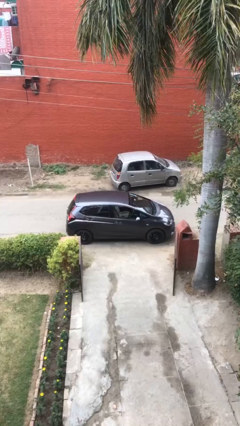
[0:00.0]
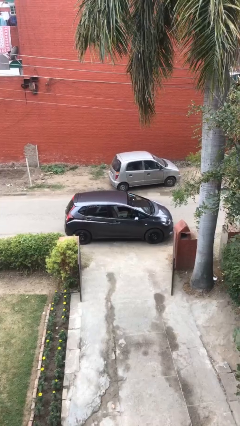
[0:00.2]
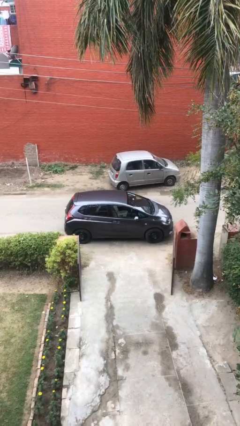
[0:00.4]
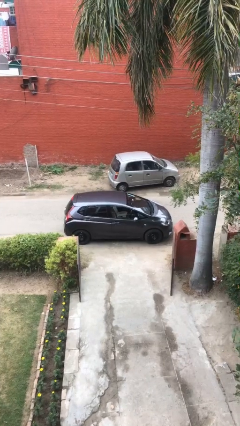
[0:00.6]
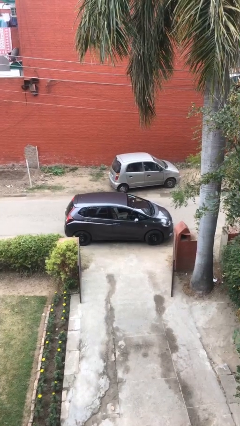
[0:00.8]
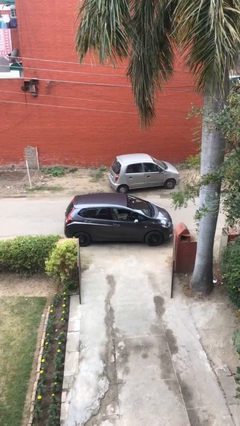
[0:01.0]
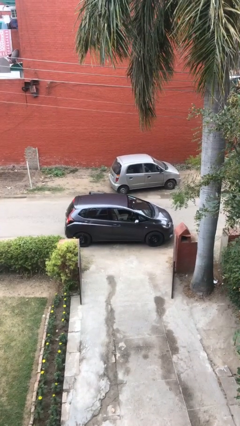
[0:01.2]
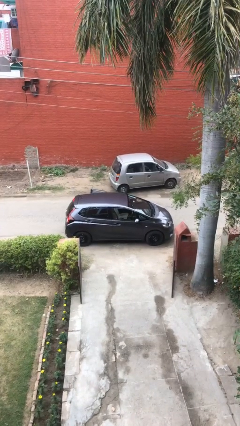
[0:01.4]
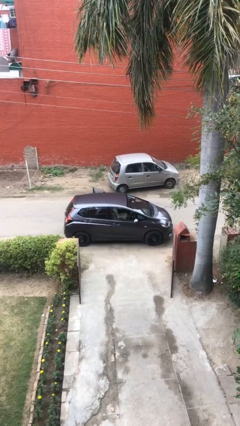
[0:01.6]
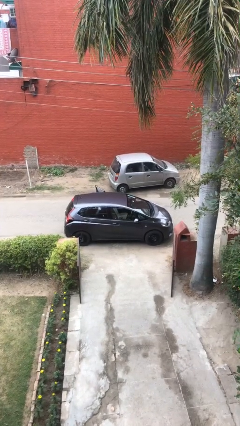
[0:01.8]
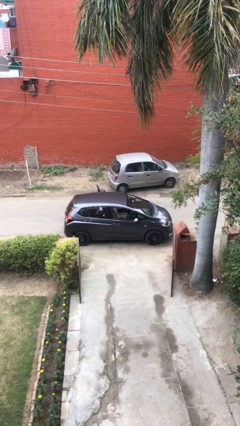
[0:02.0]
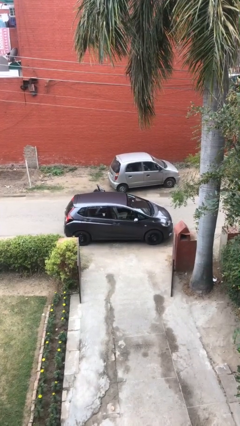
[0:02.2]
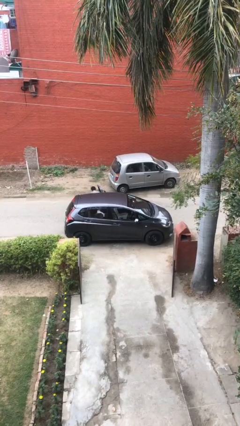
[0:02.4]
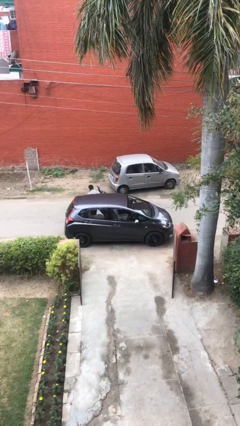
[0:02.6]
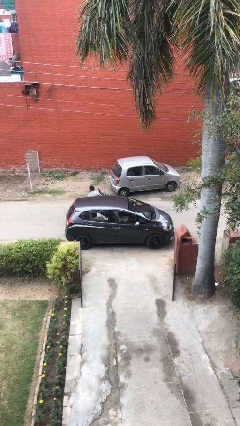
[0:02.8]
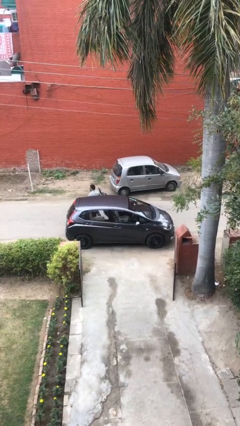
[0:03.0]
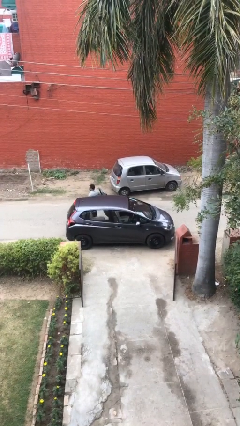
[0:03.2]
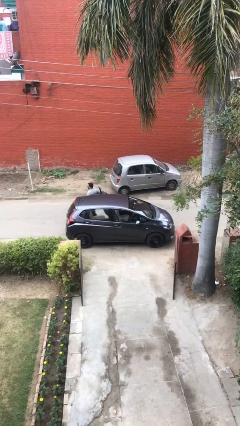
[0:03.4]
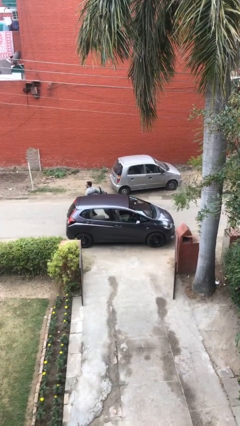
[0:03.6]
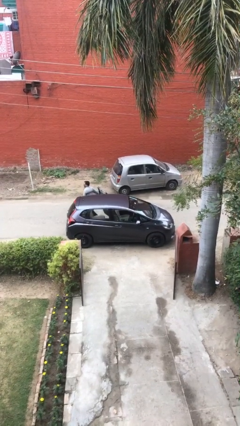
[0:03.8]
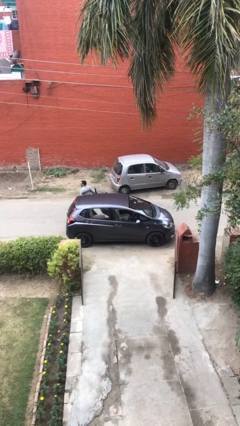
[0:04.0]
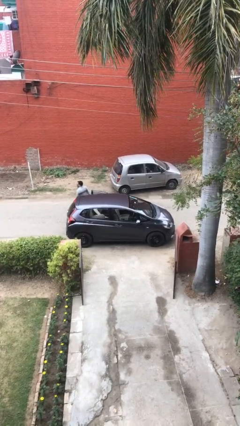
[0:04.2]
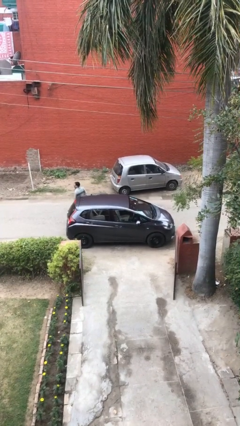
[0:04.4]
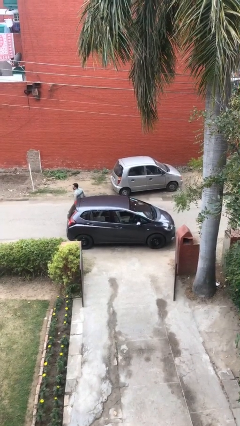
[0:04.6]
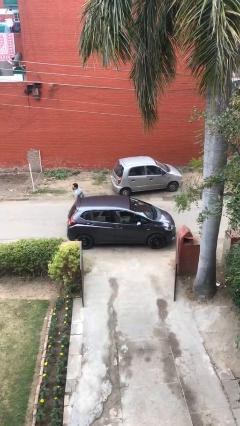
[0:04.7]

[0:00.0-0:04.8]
car drops off person

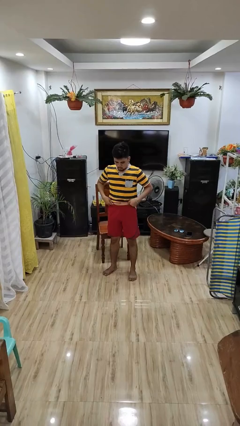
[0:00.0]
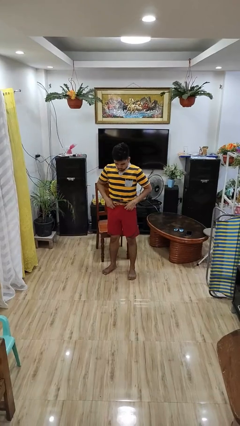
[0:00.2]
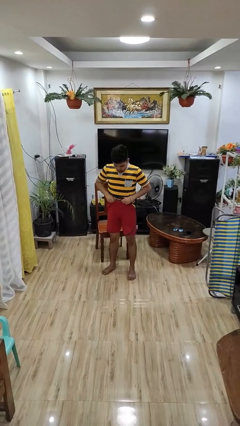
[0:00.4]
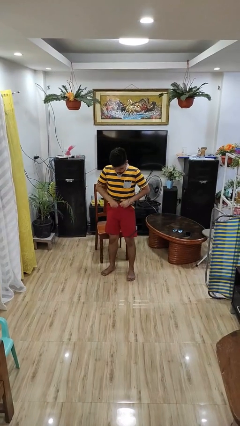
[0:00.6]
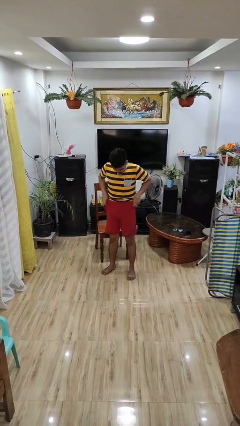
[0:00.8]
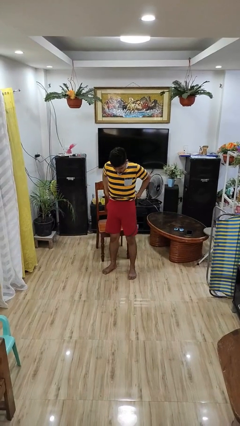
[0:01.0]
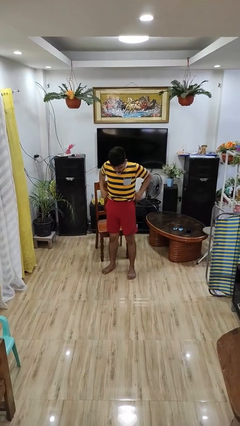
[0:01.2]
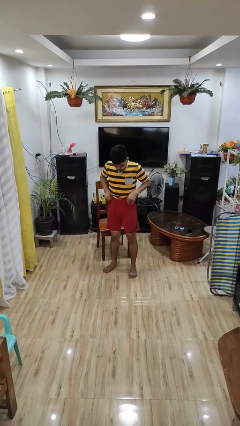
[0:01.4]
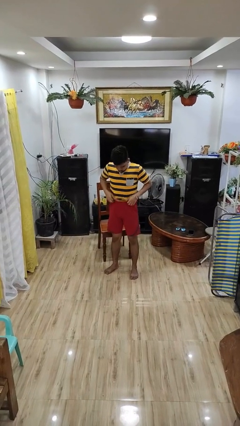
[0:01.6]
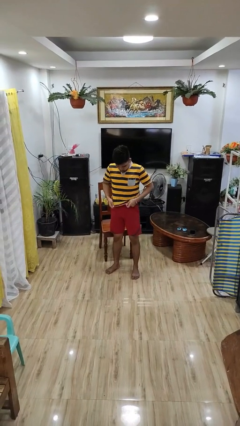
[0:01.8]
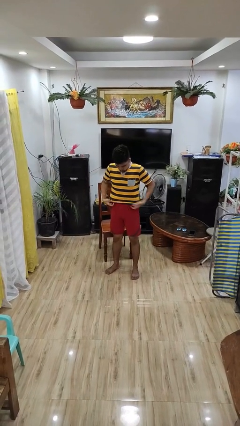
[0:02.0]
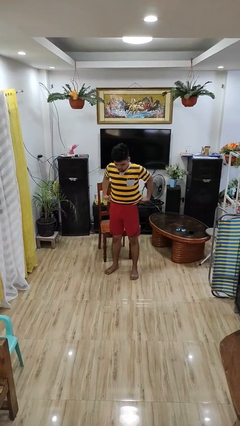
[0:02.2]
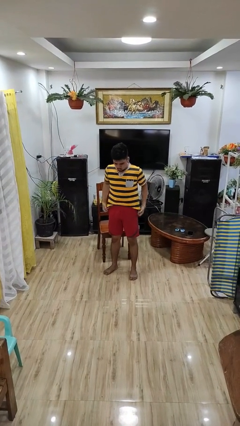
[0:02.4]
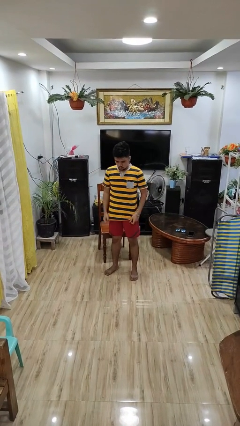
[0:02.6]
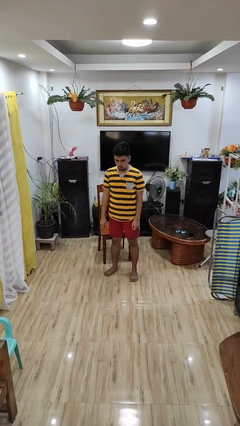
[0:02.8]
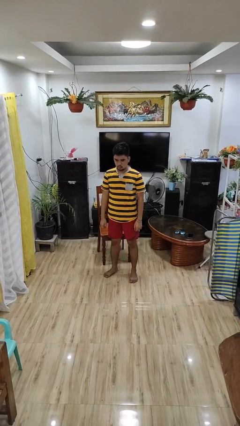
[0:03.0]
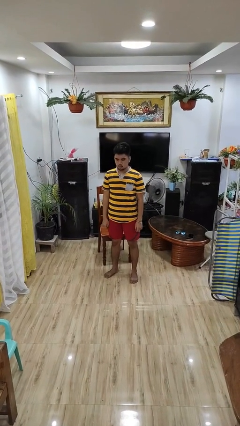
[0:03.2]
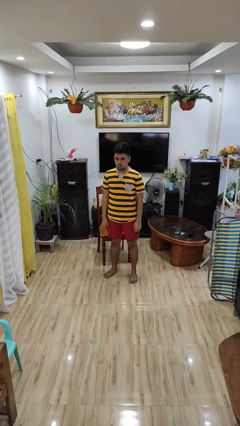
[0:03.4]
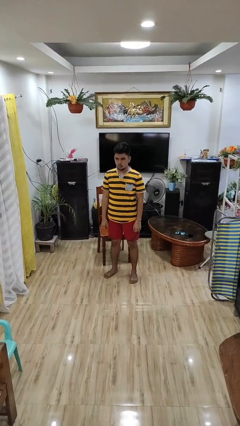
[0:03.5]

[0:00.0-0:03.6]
person hikes up pants

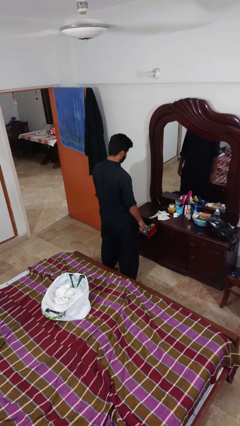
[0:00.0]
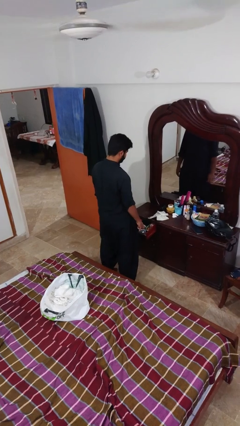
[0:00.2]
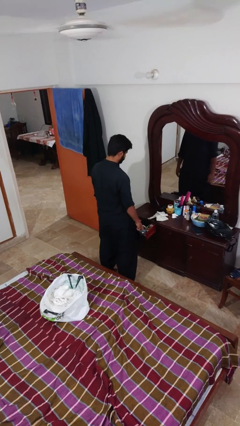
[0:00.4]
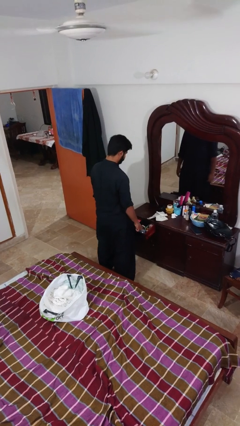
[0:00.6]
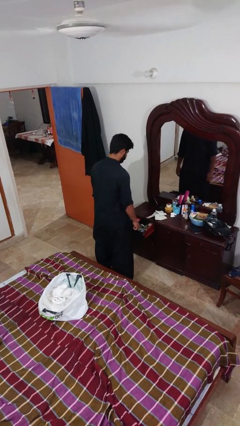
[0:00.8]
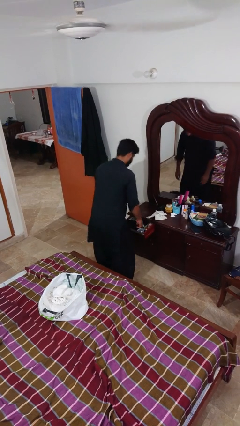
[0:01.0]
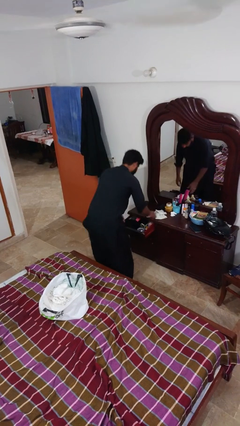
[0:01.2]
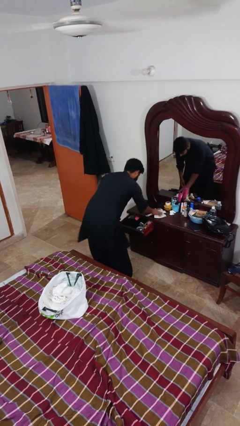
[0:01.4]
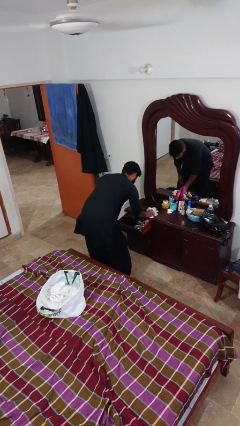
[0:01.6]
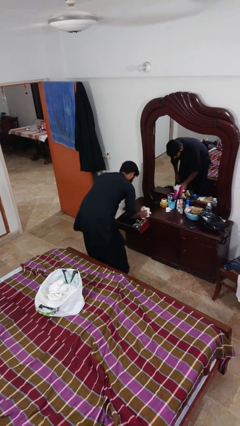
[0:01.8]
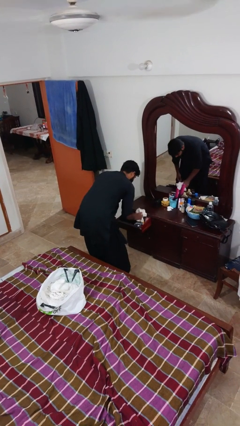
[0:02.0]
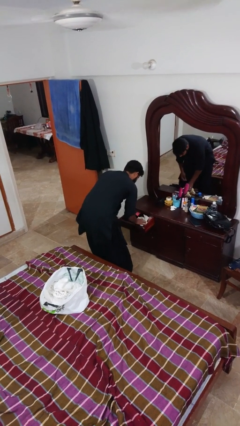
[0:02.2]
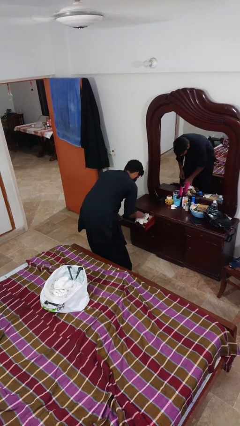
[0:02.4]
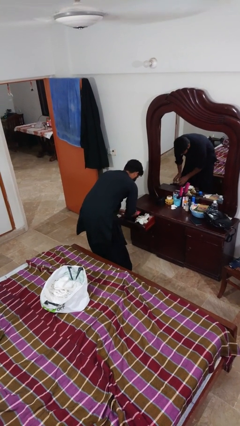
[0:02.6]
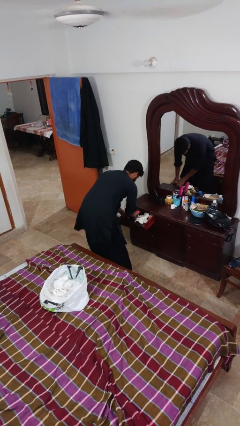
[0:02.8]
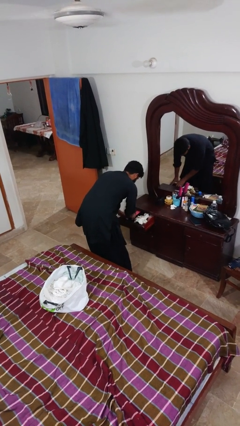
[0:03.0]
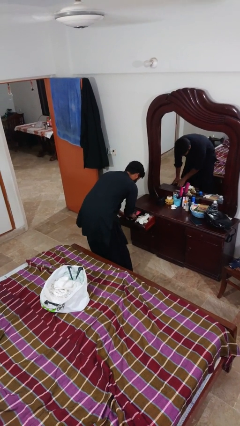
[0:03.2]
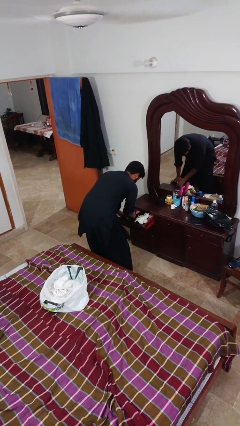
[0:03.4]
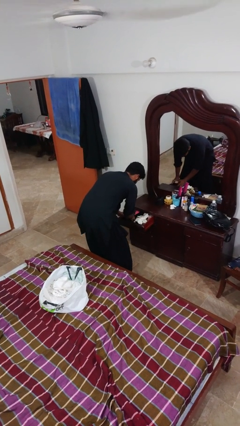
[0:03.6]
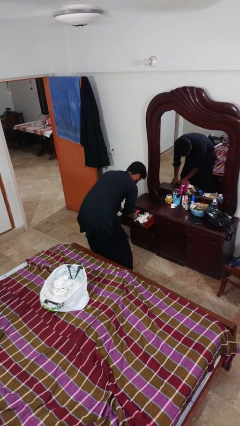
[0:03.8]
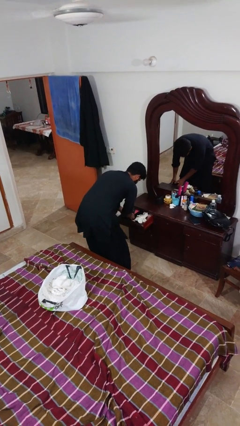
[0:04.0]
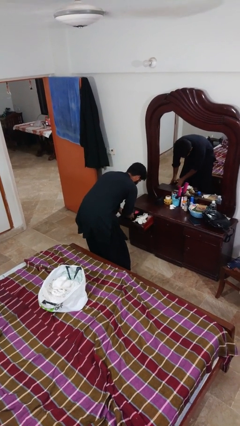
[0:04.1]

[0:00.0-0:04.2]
person puts clothes into dresser

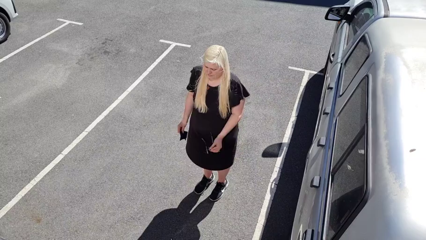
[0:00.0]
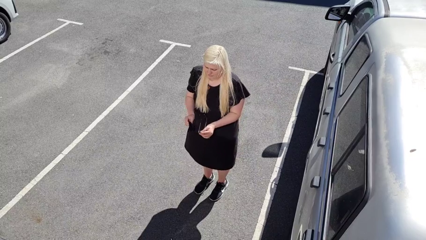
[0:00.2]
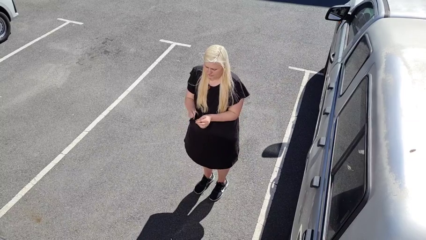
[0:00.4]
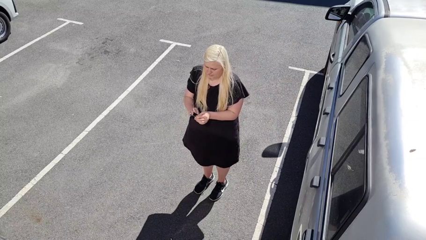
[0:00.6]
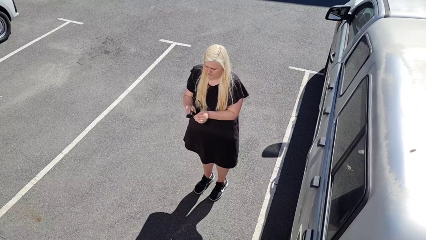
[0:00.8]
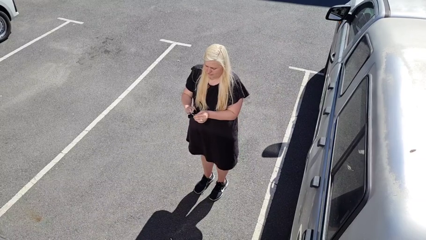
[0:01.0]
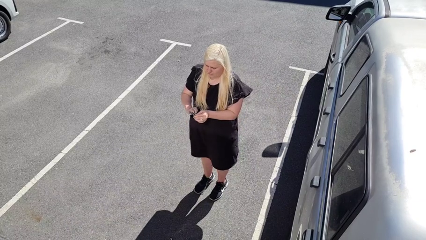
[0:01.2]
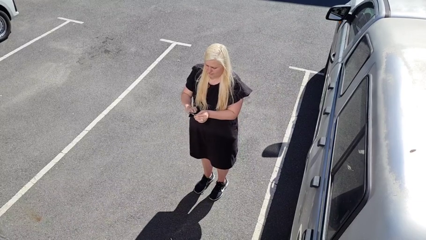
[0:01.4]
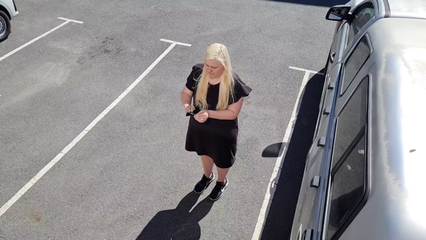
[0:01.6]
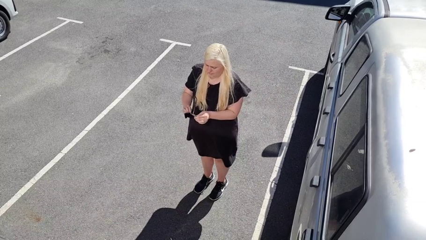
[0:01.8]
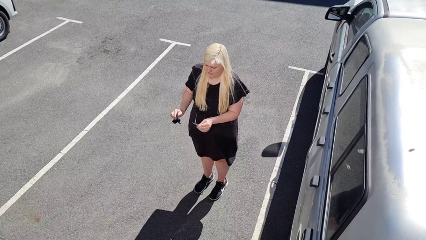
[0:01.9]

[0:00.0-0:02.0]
person cleans eyeglasses

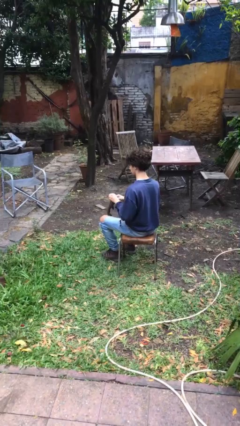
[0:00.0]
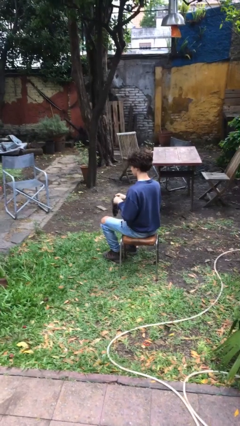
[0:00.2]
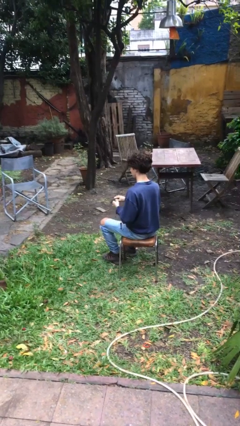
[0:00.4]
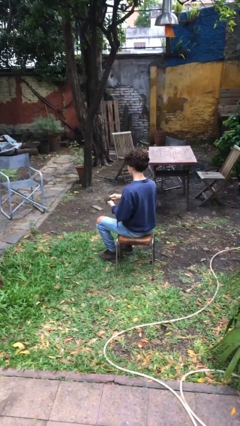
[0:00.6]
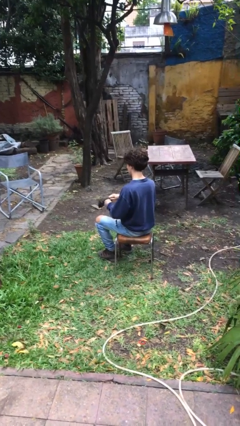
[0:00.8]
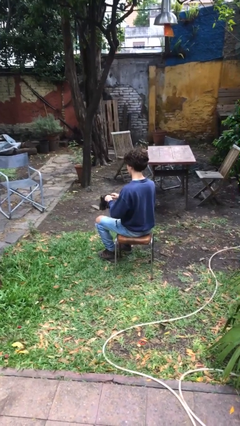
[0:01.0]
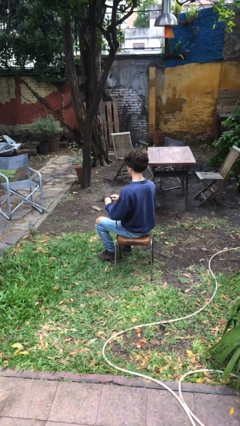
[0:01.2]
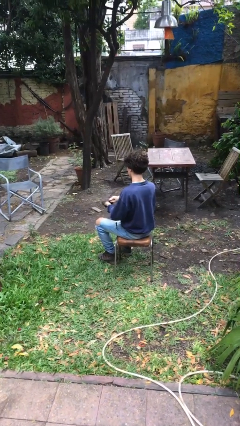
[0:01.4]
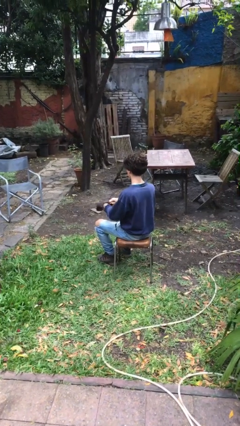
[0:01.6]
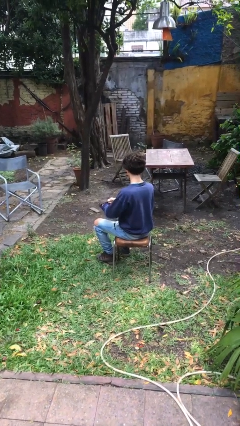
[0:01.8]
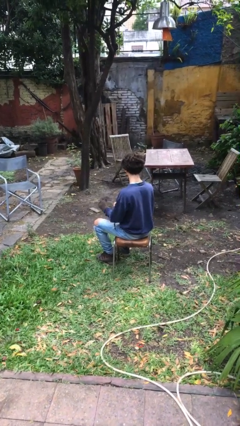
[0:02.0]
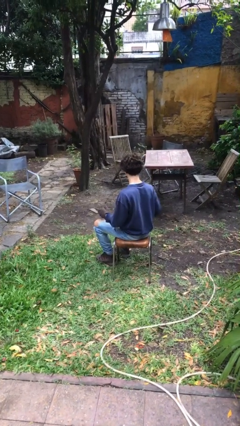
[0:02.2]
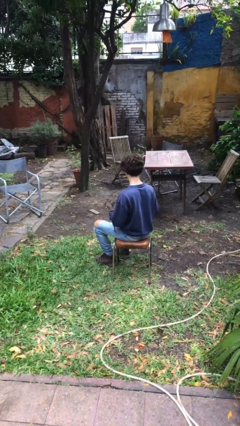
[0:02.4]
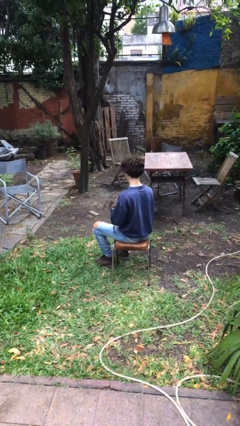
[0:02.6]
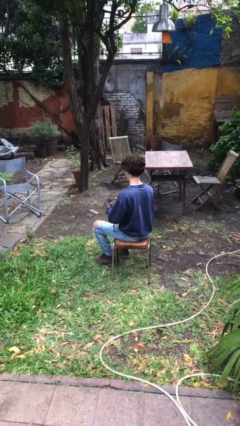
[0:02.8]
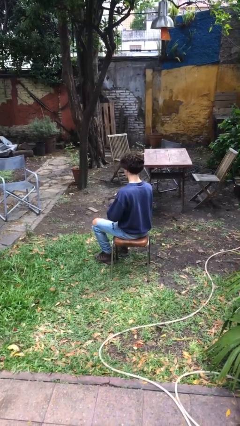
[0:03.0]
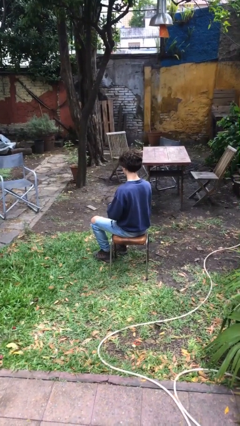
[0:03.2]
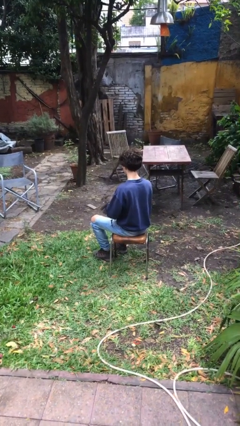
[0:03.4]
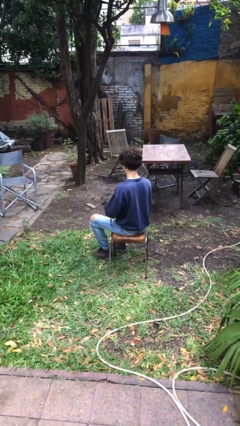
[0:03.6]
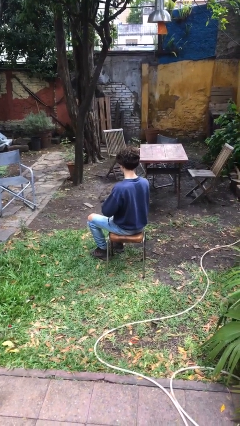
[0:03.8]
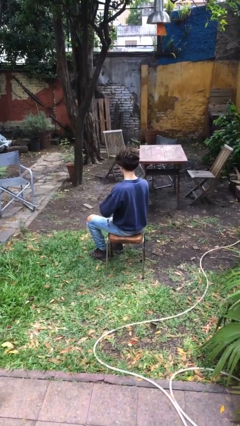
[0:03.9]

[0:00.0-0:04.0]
person puts on gloves
